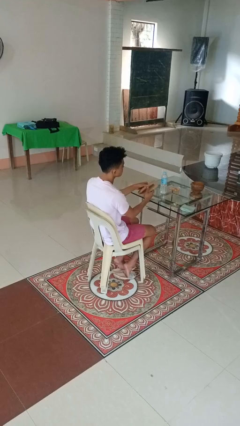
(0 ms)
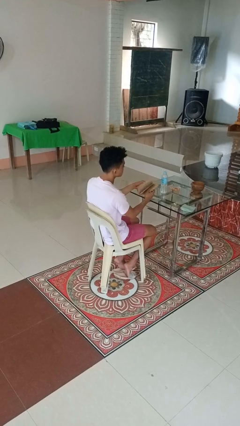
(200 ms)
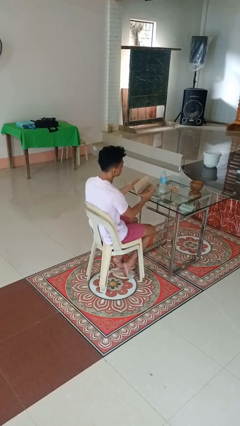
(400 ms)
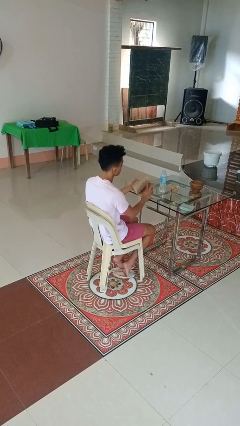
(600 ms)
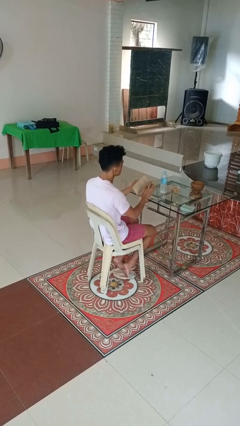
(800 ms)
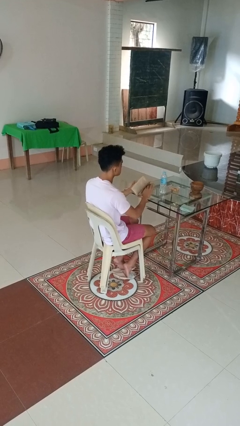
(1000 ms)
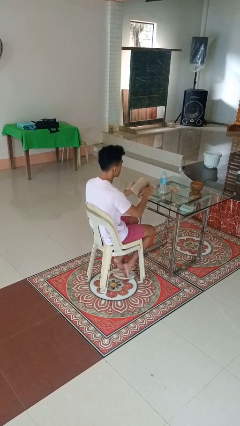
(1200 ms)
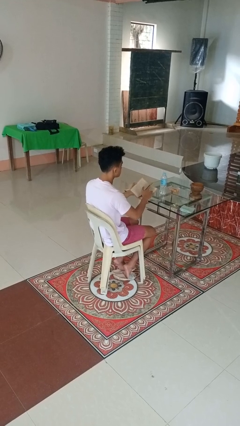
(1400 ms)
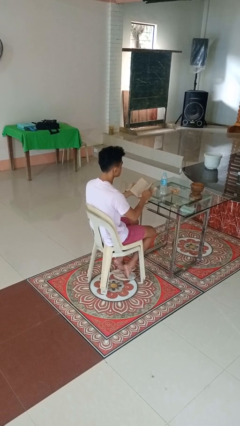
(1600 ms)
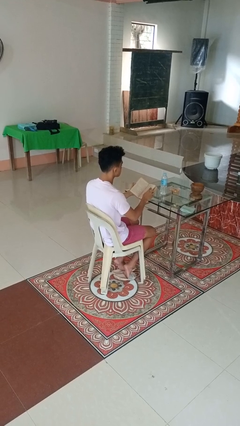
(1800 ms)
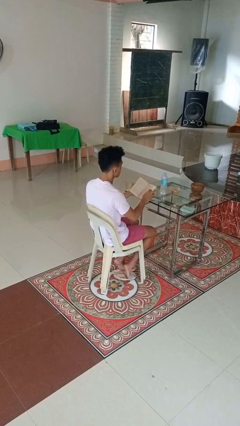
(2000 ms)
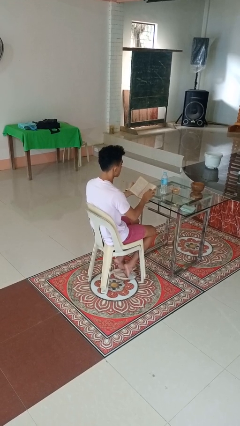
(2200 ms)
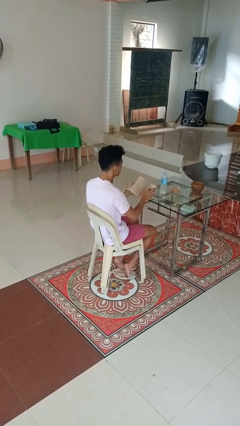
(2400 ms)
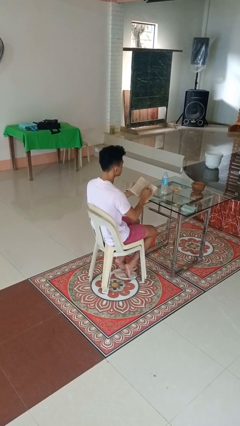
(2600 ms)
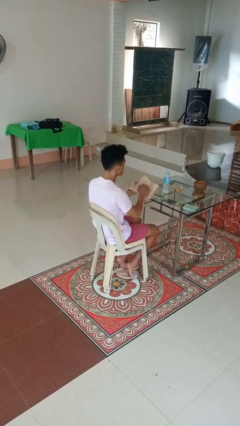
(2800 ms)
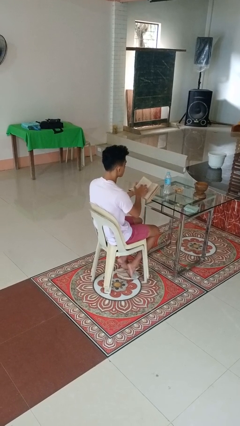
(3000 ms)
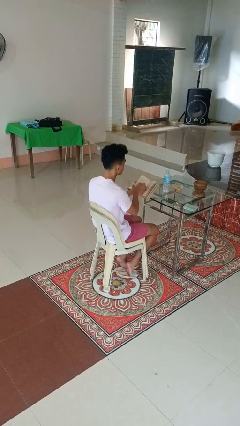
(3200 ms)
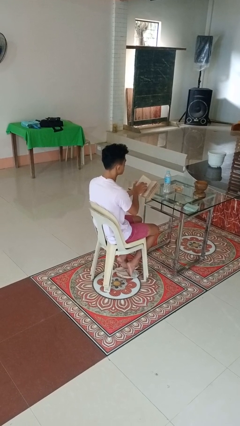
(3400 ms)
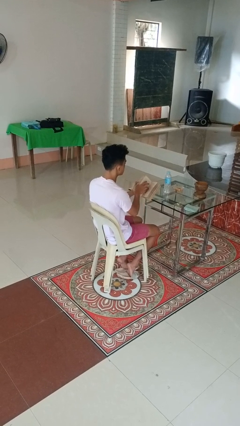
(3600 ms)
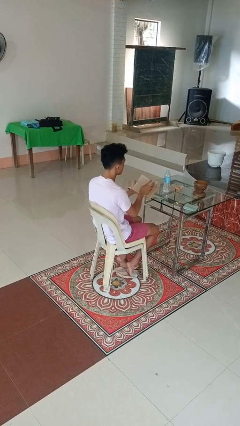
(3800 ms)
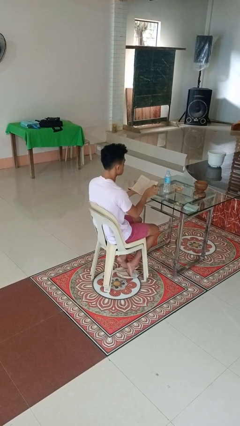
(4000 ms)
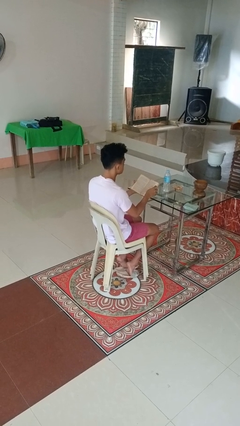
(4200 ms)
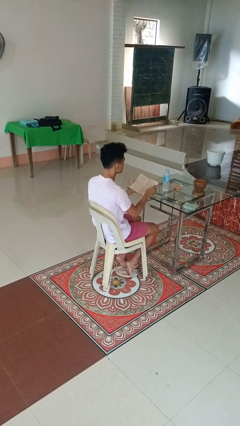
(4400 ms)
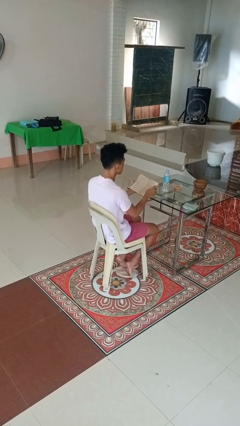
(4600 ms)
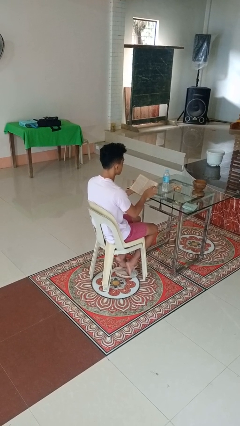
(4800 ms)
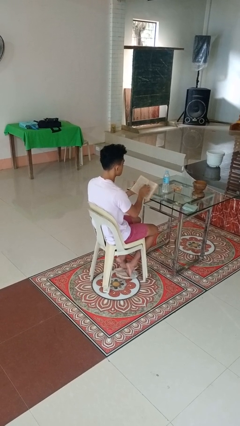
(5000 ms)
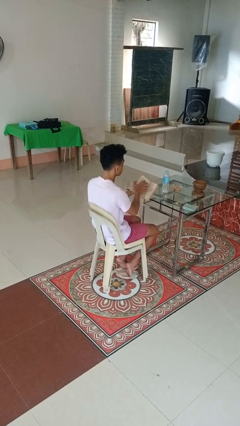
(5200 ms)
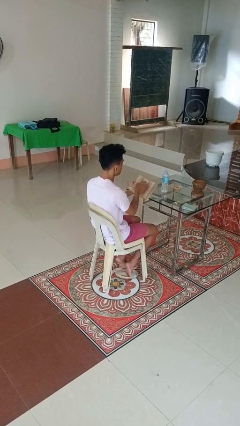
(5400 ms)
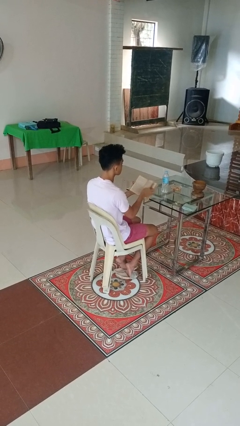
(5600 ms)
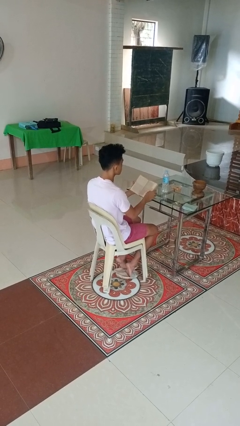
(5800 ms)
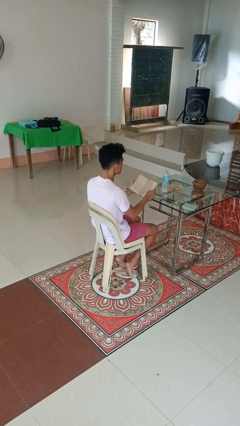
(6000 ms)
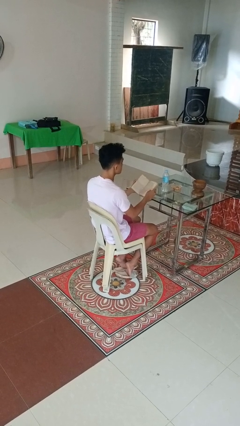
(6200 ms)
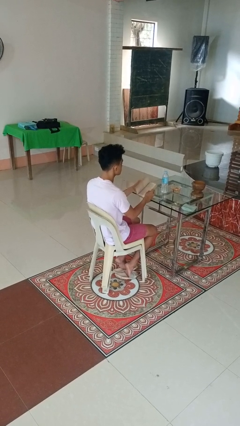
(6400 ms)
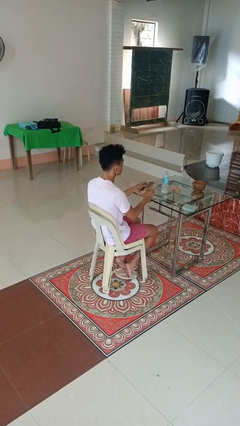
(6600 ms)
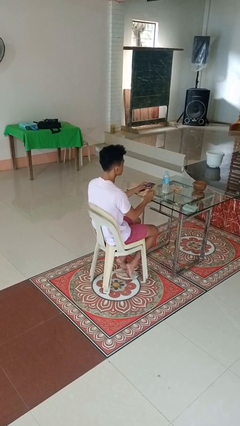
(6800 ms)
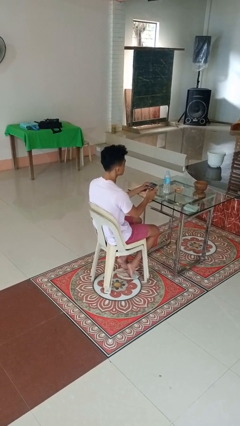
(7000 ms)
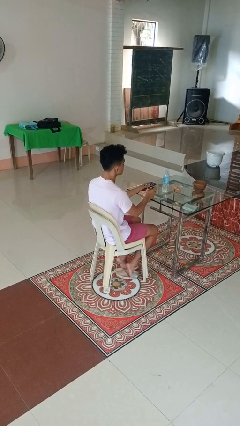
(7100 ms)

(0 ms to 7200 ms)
person reads book

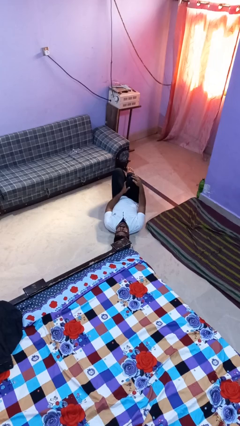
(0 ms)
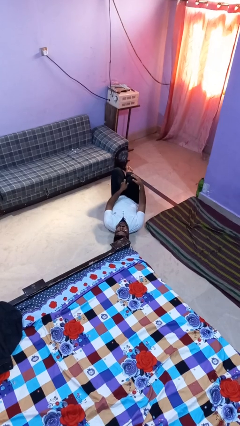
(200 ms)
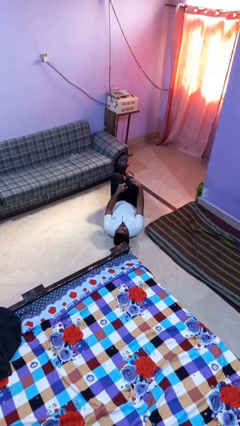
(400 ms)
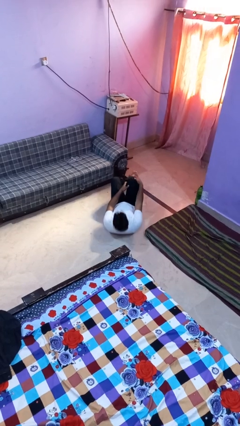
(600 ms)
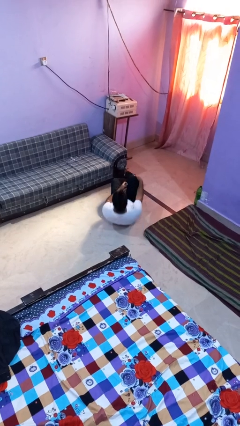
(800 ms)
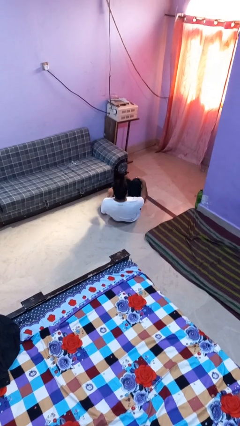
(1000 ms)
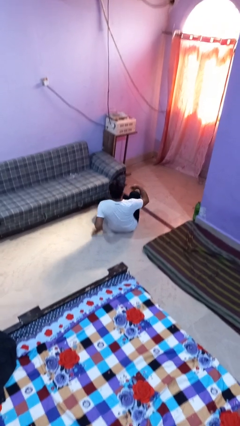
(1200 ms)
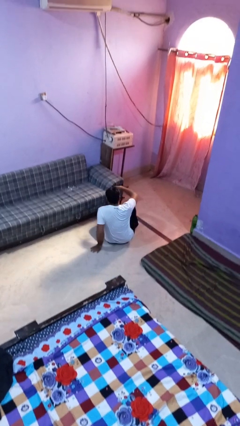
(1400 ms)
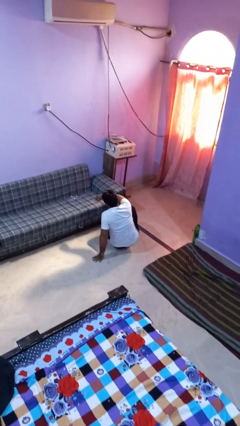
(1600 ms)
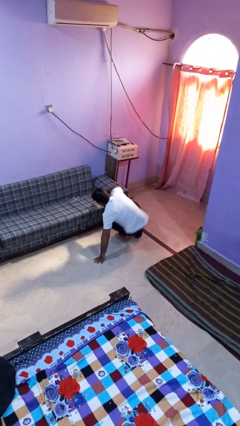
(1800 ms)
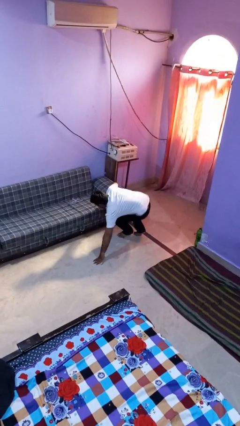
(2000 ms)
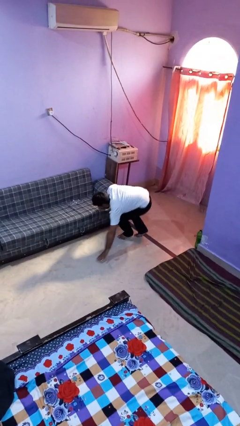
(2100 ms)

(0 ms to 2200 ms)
person stands up from floor

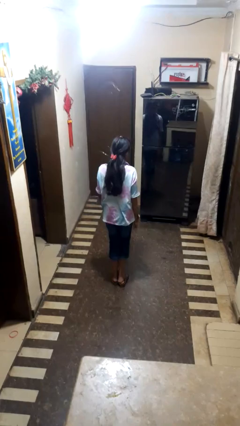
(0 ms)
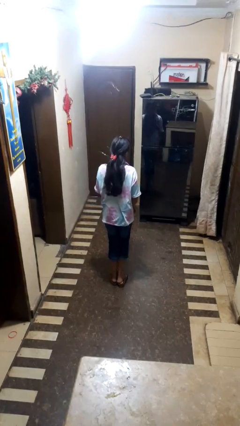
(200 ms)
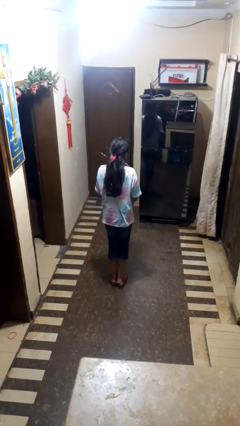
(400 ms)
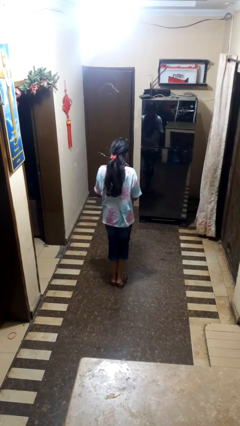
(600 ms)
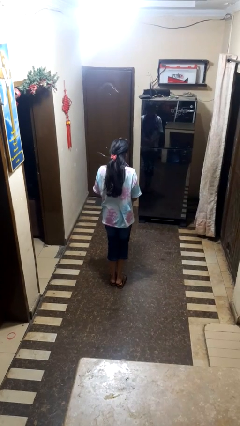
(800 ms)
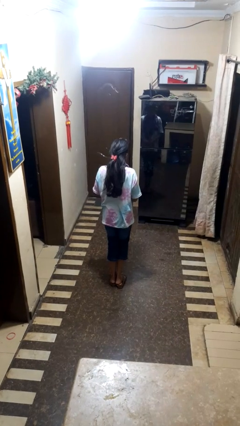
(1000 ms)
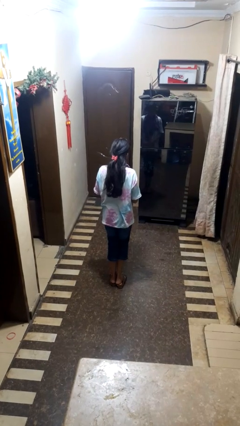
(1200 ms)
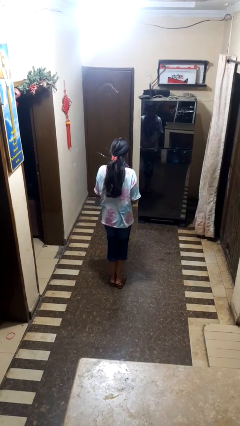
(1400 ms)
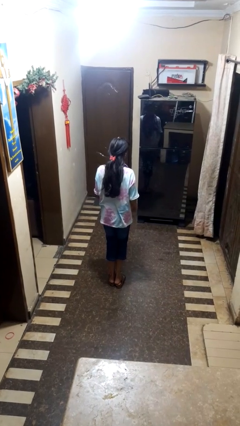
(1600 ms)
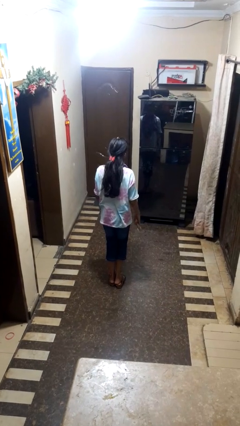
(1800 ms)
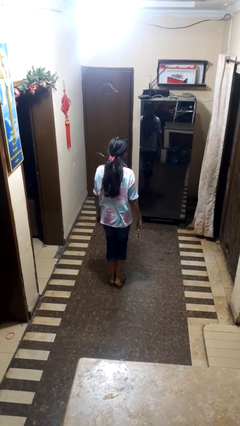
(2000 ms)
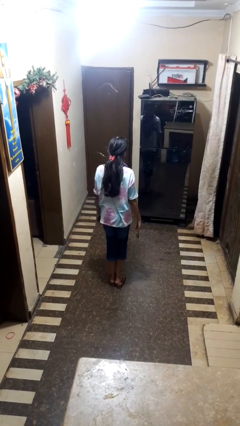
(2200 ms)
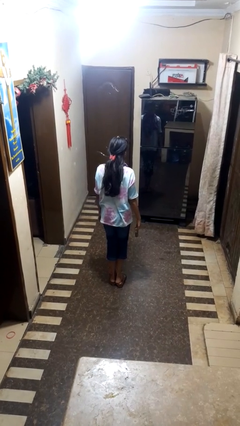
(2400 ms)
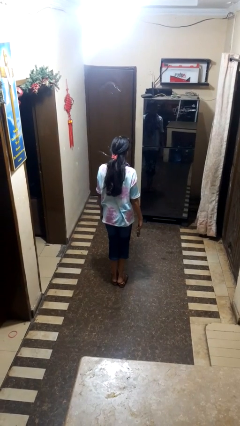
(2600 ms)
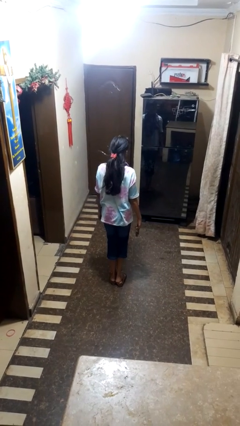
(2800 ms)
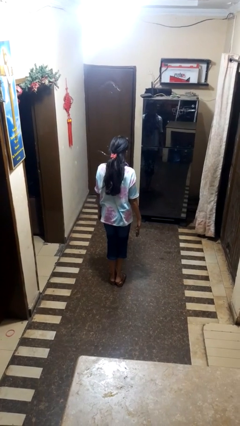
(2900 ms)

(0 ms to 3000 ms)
person takes off wristwatch

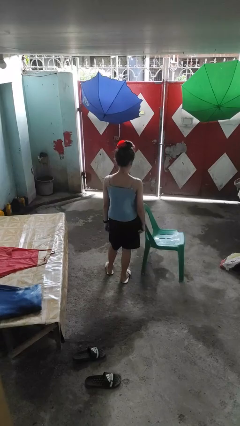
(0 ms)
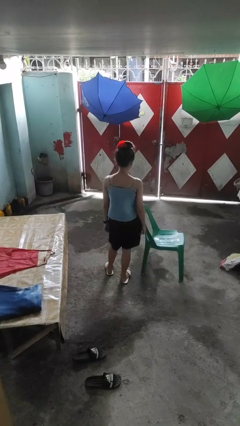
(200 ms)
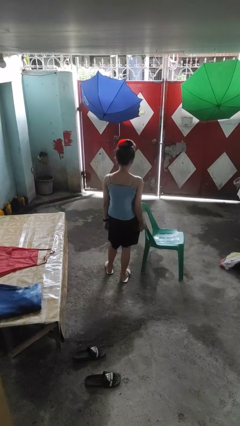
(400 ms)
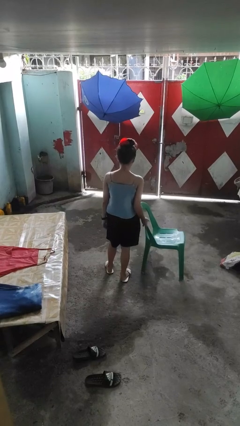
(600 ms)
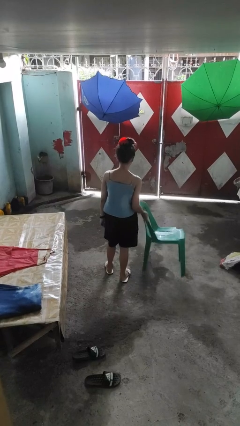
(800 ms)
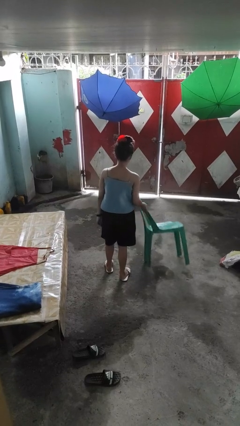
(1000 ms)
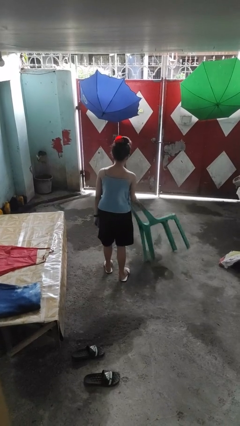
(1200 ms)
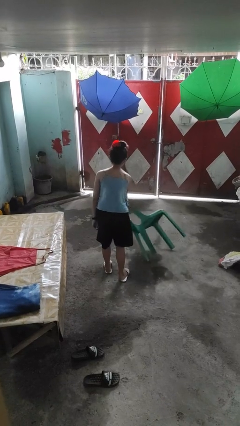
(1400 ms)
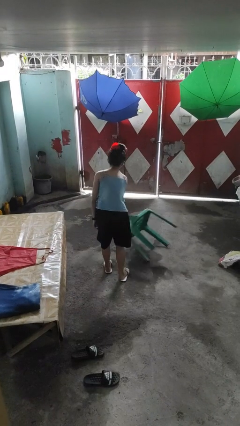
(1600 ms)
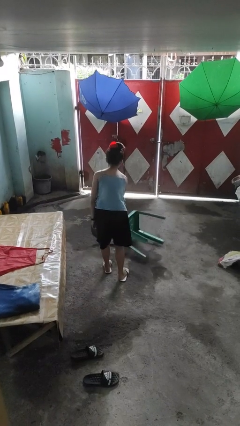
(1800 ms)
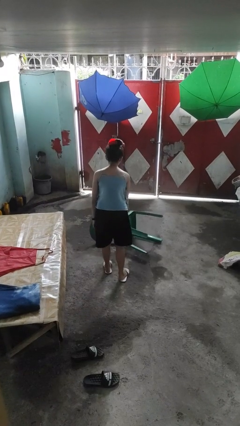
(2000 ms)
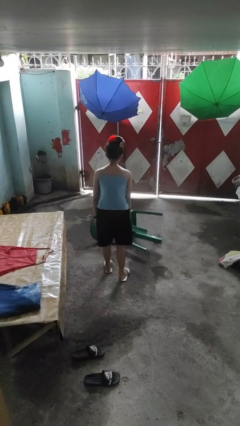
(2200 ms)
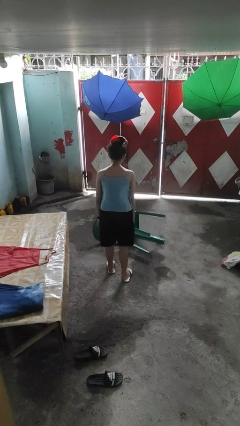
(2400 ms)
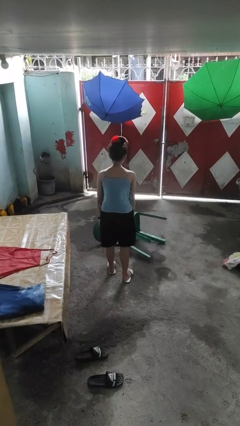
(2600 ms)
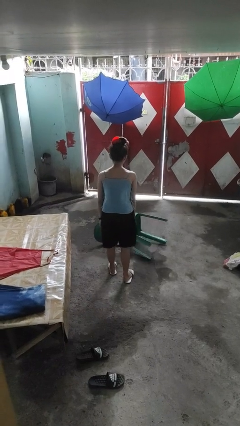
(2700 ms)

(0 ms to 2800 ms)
person knocks over furniture

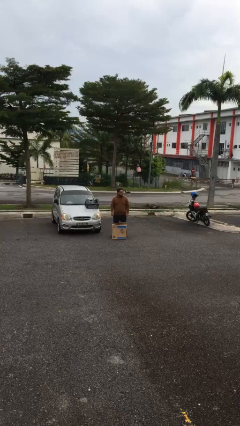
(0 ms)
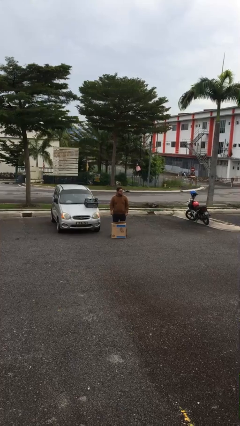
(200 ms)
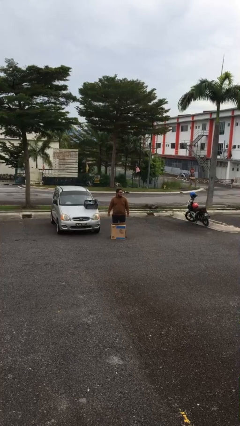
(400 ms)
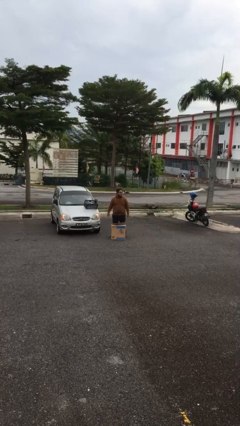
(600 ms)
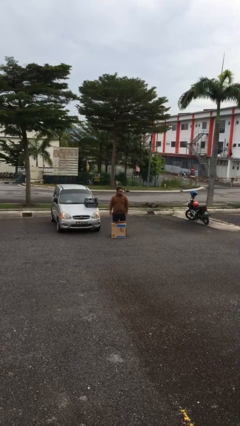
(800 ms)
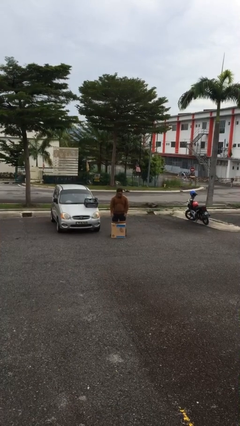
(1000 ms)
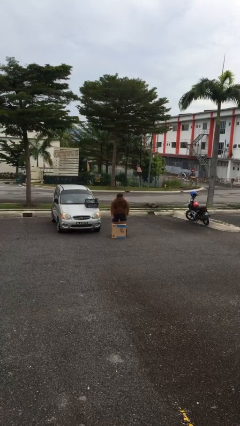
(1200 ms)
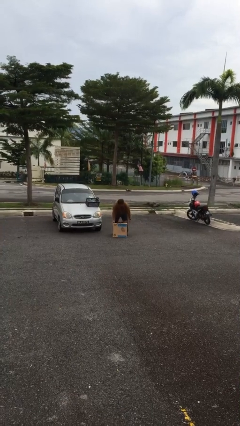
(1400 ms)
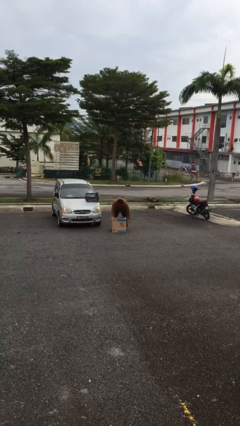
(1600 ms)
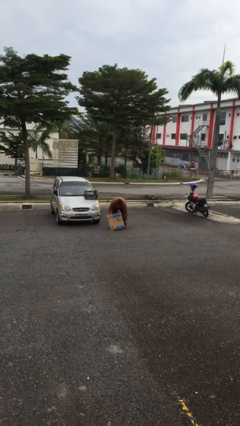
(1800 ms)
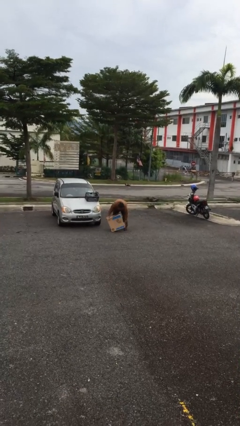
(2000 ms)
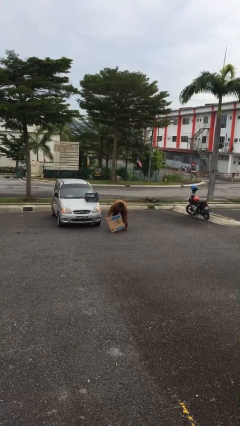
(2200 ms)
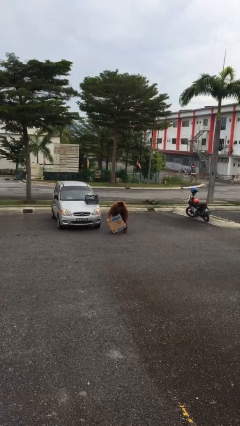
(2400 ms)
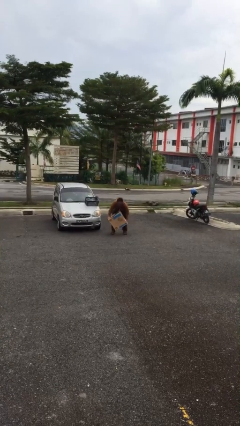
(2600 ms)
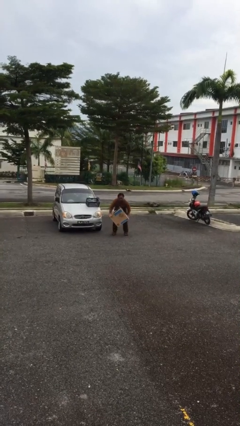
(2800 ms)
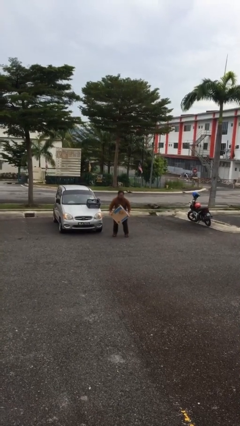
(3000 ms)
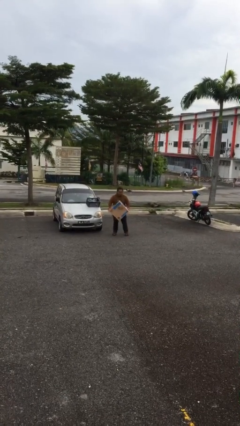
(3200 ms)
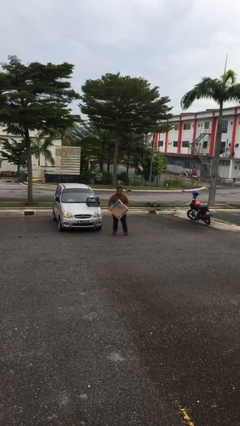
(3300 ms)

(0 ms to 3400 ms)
person picks up object from floor
